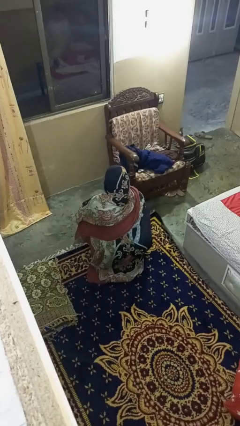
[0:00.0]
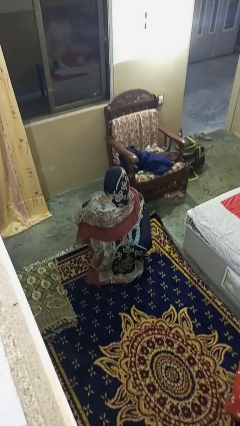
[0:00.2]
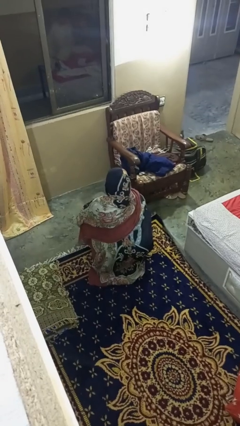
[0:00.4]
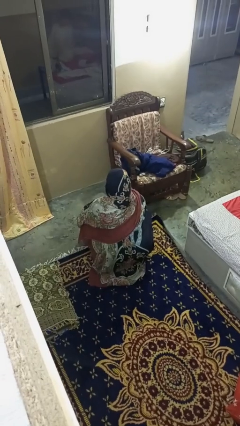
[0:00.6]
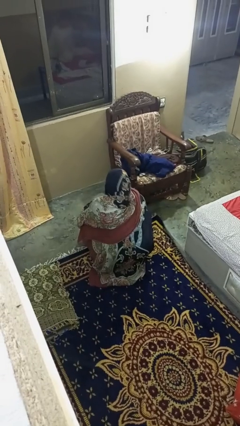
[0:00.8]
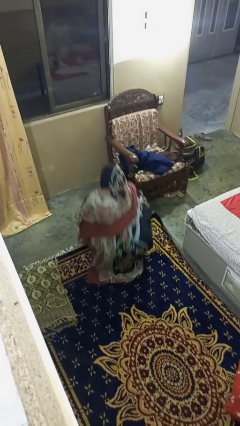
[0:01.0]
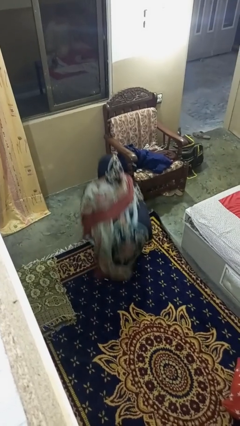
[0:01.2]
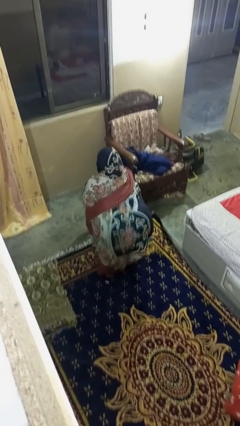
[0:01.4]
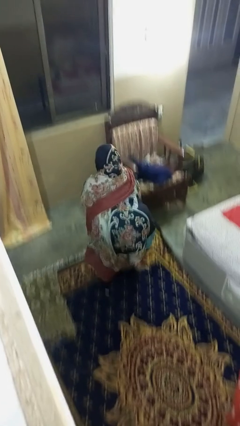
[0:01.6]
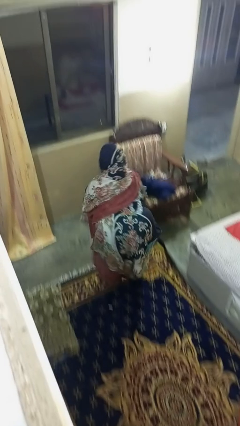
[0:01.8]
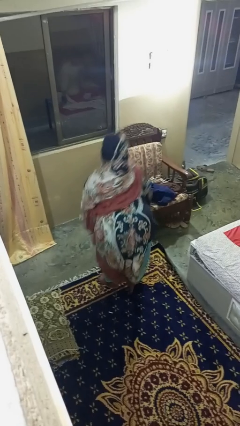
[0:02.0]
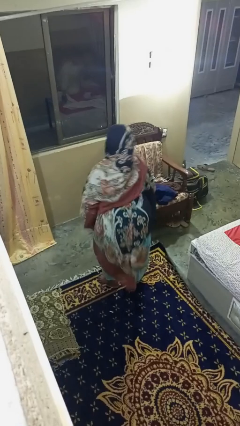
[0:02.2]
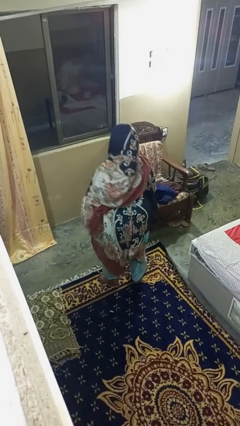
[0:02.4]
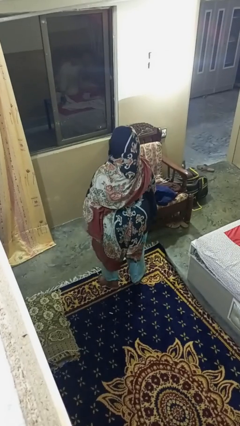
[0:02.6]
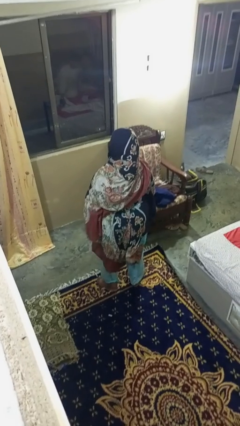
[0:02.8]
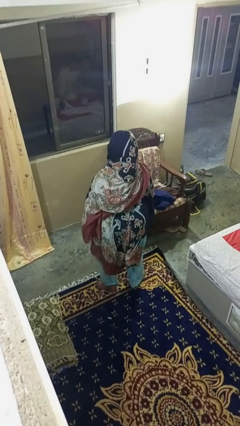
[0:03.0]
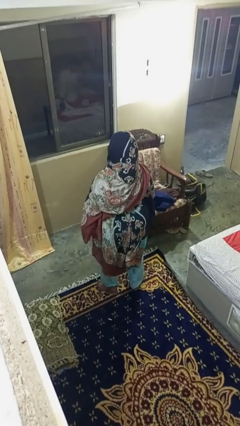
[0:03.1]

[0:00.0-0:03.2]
person stands up

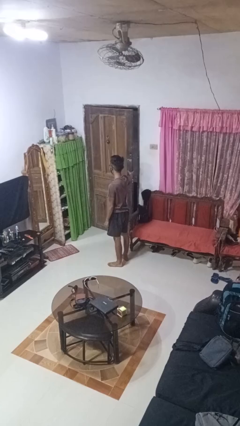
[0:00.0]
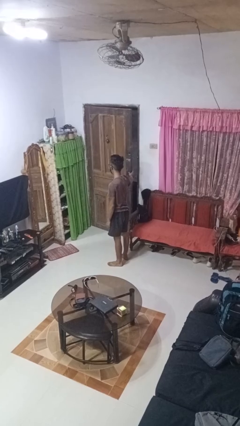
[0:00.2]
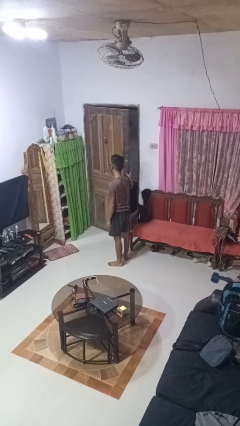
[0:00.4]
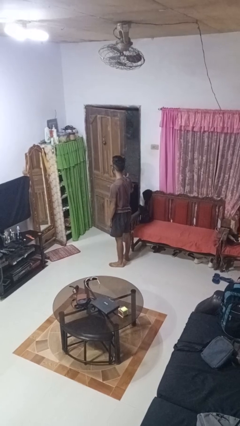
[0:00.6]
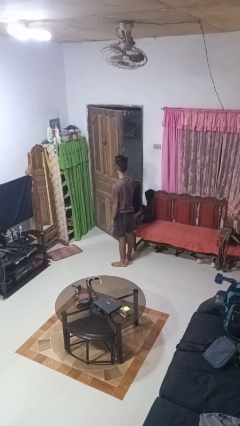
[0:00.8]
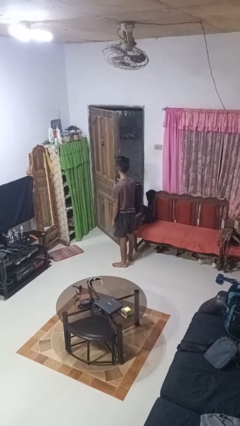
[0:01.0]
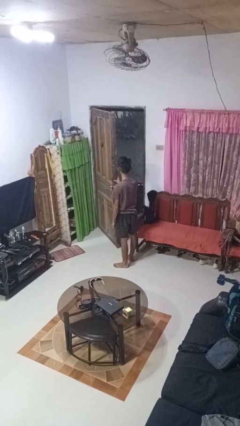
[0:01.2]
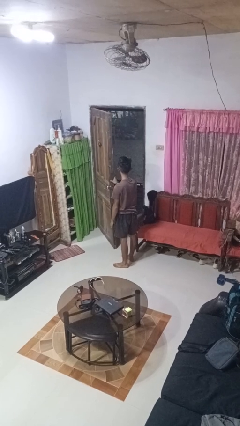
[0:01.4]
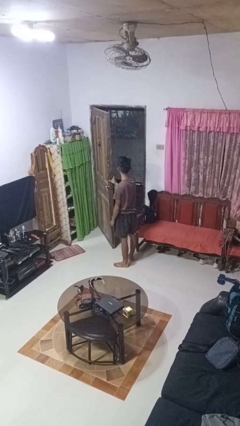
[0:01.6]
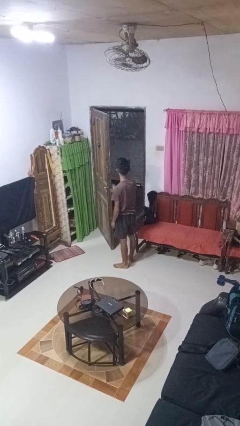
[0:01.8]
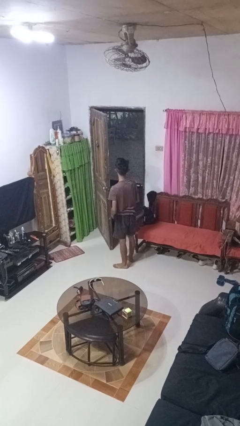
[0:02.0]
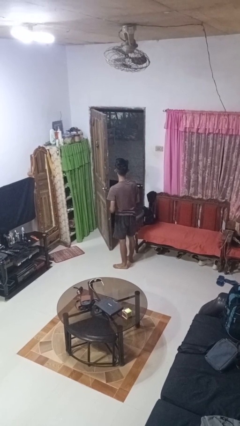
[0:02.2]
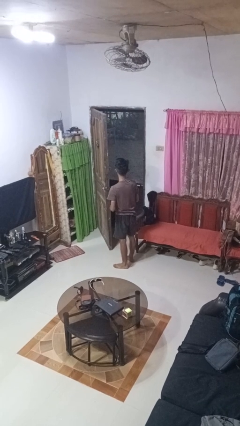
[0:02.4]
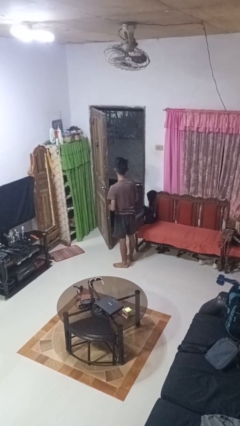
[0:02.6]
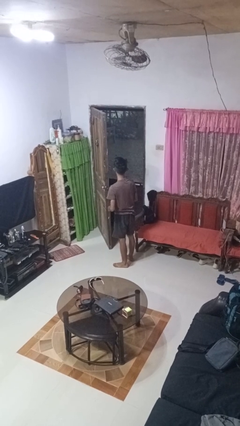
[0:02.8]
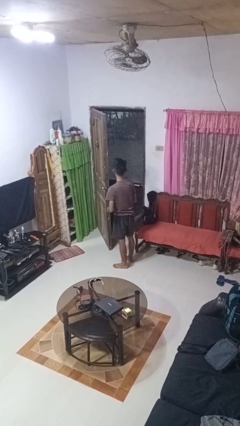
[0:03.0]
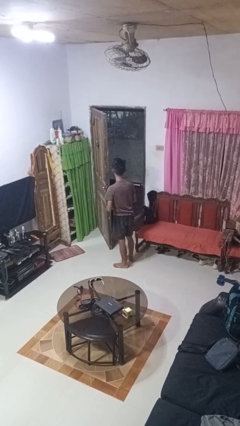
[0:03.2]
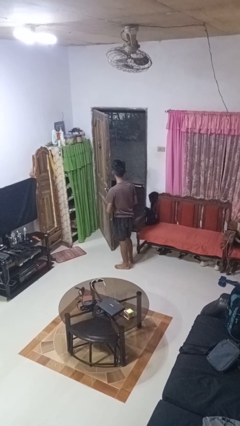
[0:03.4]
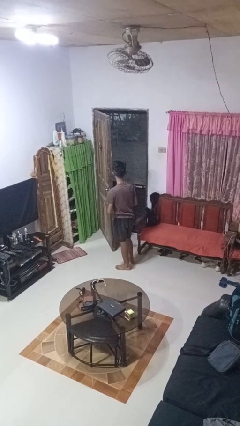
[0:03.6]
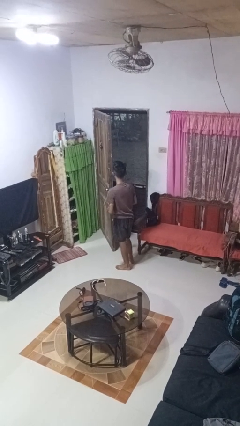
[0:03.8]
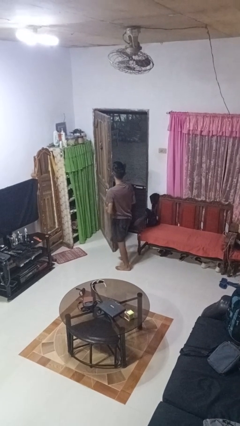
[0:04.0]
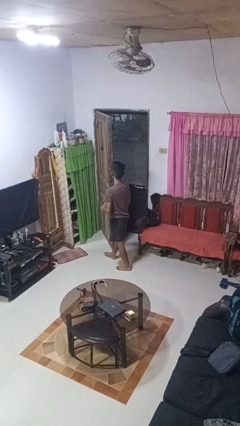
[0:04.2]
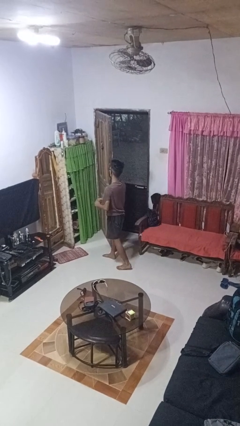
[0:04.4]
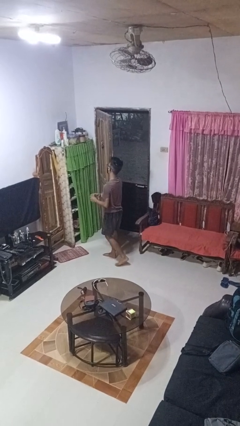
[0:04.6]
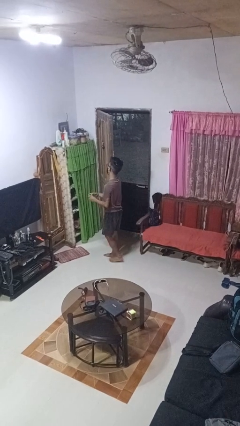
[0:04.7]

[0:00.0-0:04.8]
person opens facility door

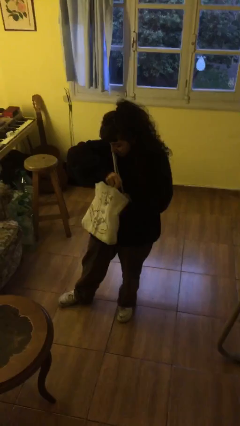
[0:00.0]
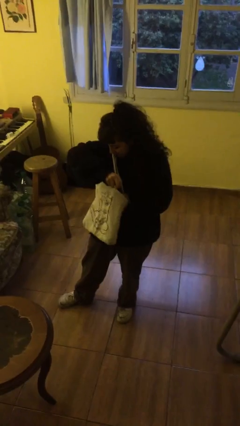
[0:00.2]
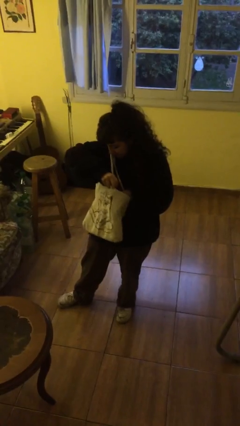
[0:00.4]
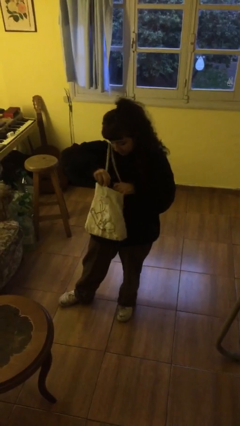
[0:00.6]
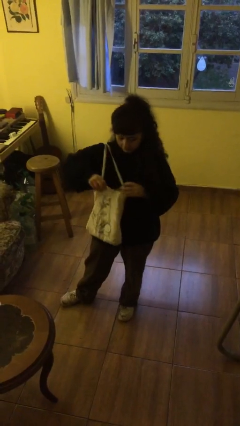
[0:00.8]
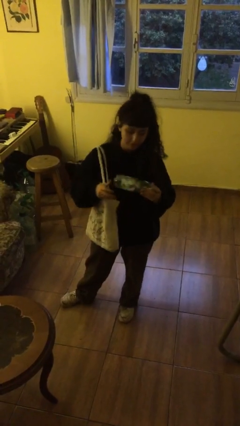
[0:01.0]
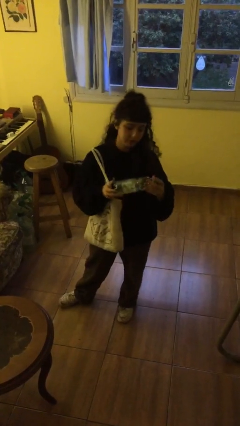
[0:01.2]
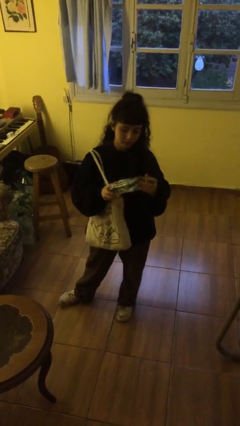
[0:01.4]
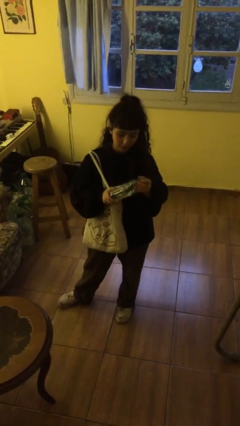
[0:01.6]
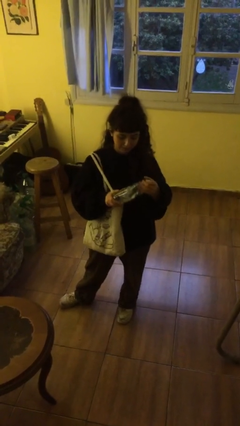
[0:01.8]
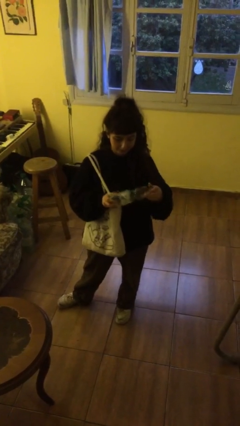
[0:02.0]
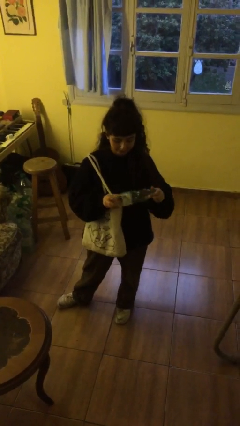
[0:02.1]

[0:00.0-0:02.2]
person takes object from purse

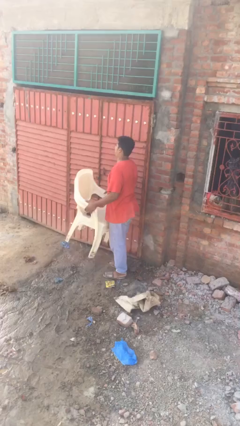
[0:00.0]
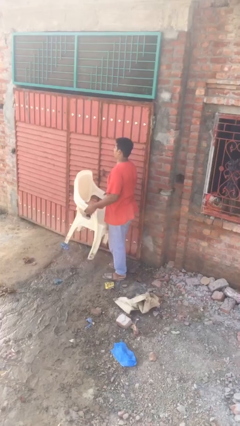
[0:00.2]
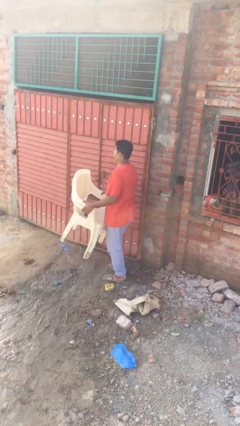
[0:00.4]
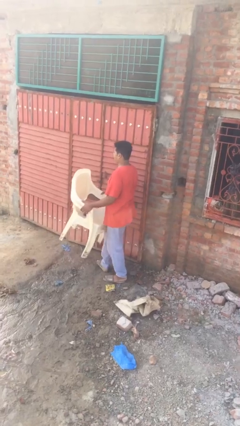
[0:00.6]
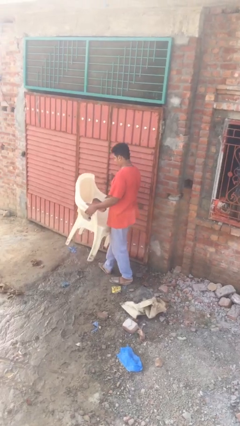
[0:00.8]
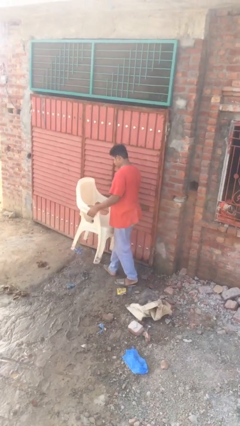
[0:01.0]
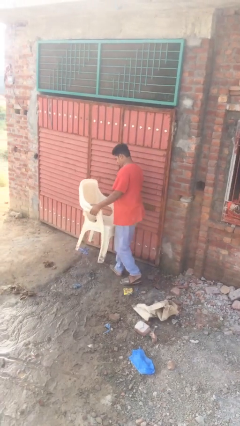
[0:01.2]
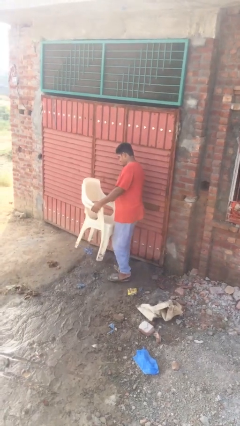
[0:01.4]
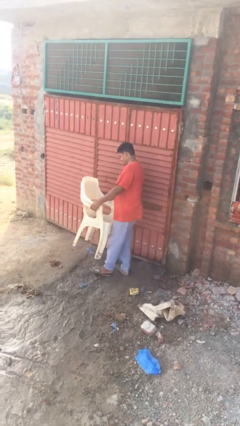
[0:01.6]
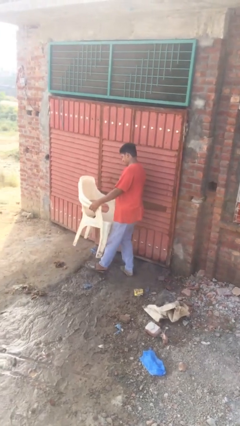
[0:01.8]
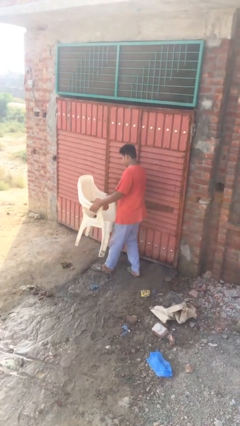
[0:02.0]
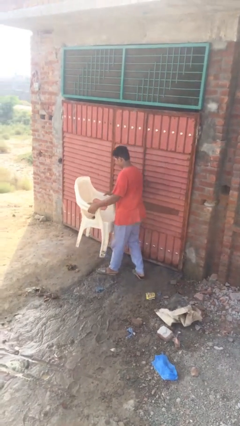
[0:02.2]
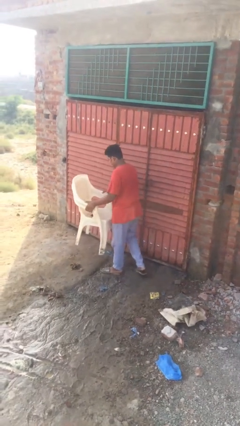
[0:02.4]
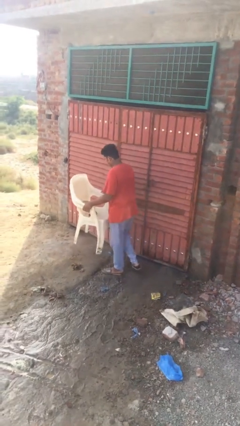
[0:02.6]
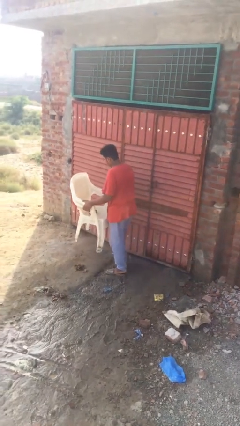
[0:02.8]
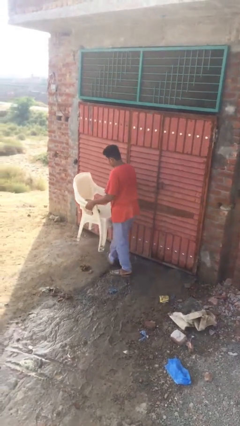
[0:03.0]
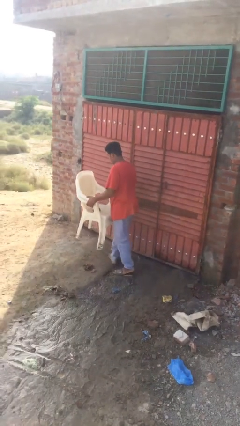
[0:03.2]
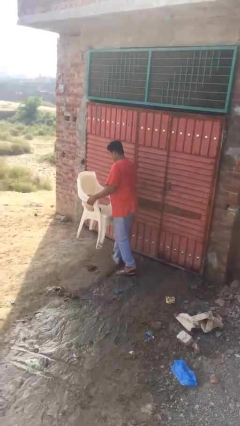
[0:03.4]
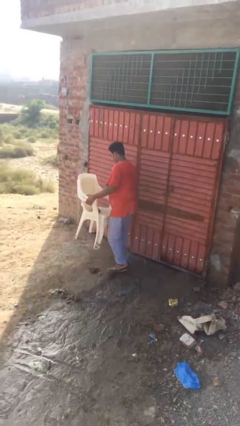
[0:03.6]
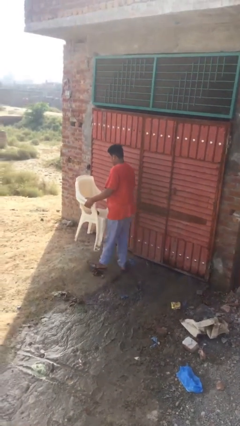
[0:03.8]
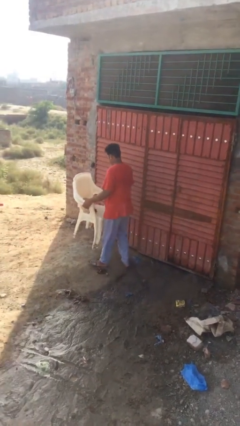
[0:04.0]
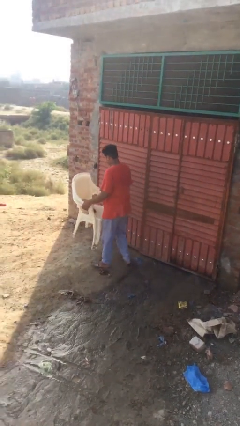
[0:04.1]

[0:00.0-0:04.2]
person carries heavy object

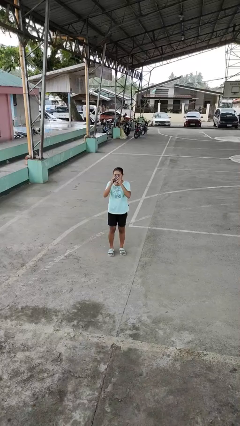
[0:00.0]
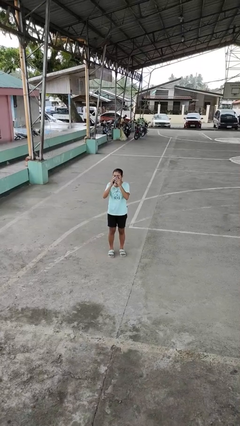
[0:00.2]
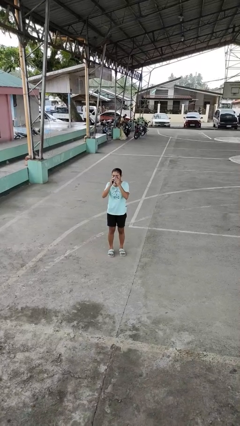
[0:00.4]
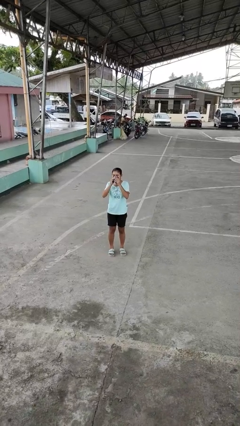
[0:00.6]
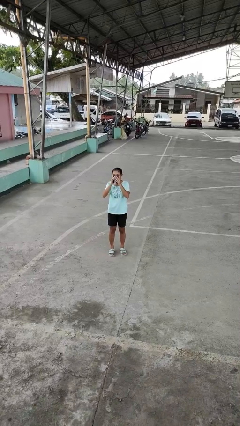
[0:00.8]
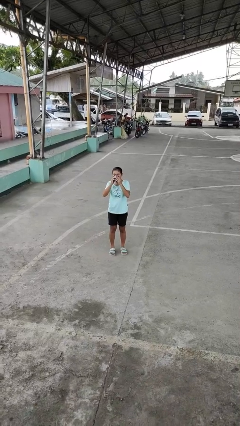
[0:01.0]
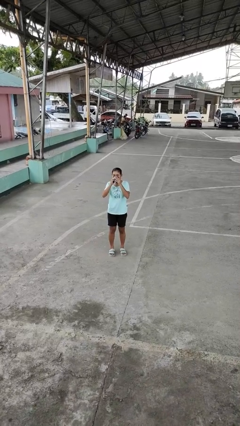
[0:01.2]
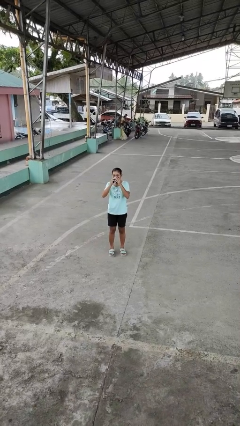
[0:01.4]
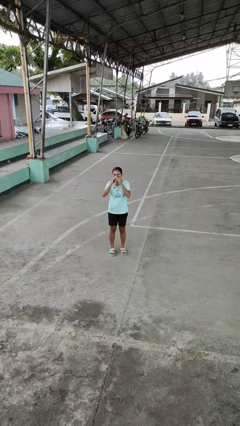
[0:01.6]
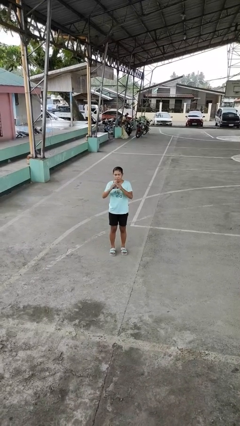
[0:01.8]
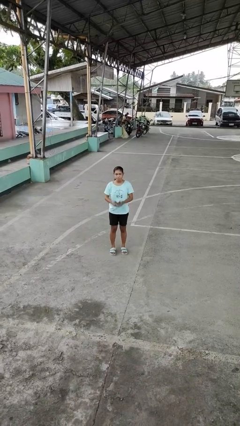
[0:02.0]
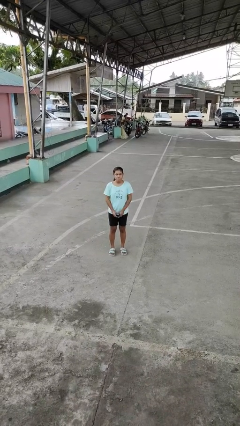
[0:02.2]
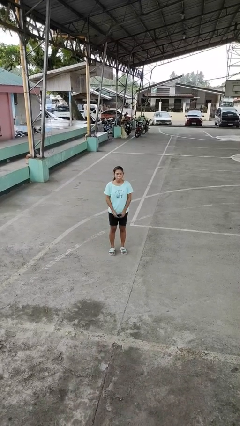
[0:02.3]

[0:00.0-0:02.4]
person blows nose

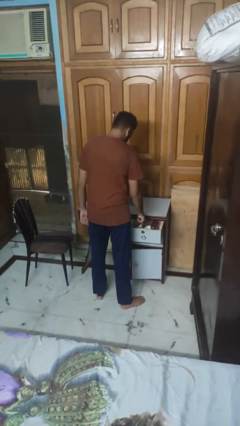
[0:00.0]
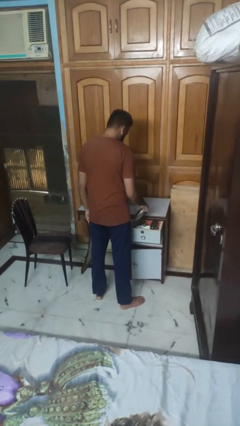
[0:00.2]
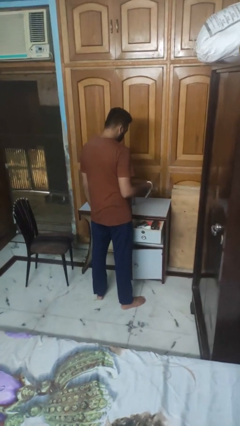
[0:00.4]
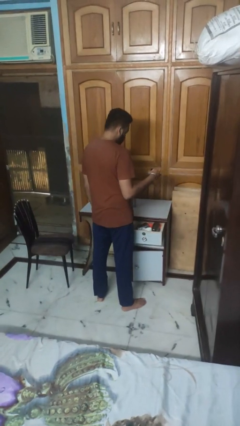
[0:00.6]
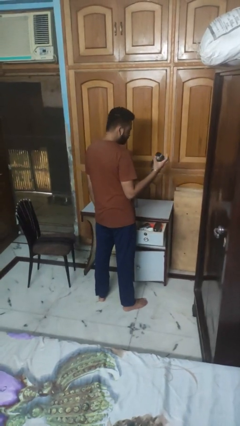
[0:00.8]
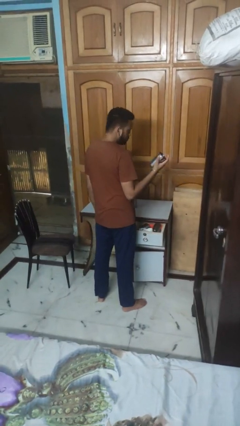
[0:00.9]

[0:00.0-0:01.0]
person takes object from kitchen drawer
